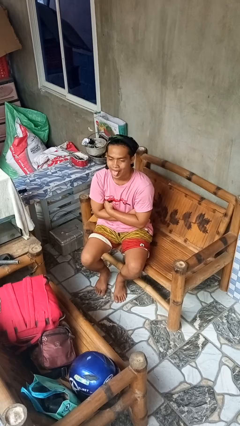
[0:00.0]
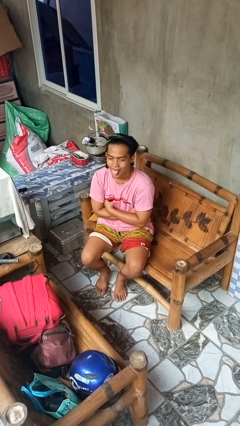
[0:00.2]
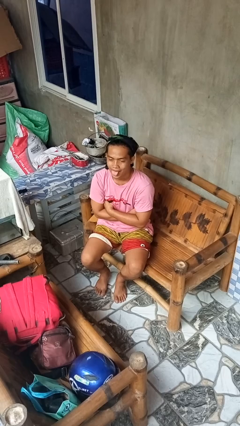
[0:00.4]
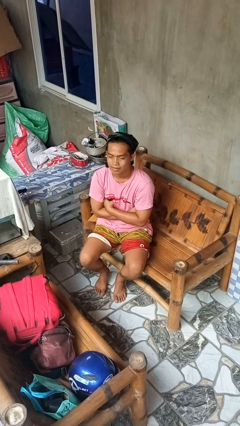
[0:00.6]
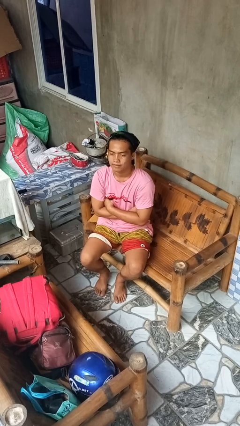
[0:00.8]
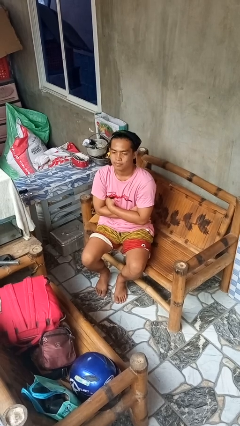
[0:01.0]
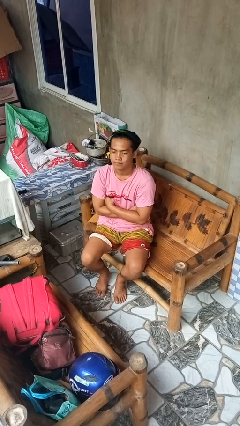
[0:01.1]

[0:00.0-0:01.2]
person sticks out tongue

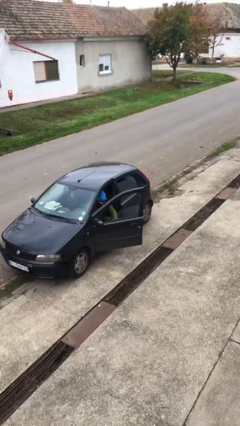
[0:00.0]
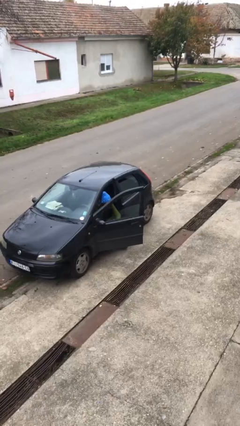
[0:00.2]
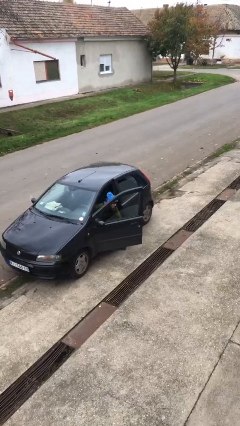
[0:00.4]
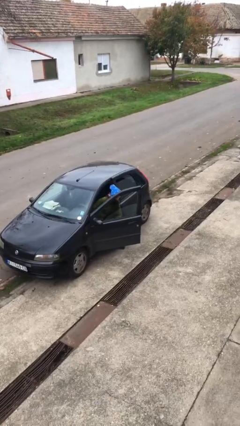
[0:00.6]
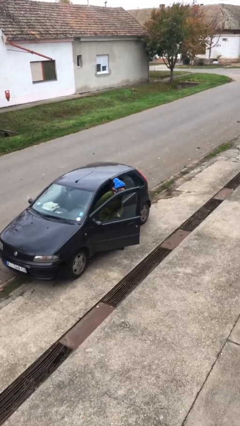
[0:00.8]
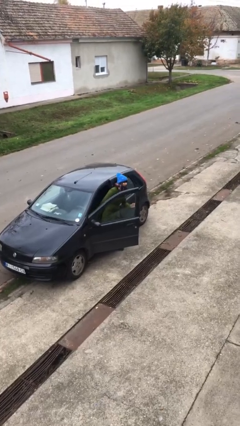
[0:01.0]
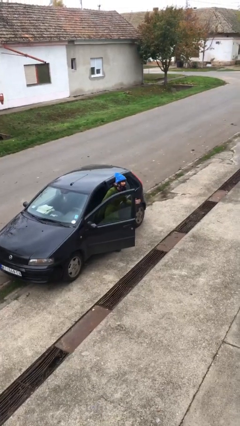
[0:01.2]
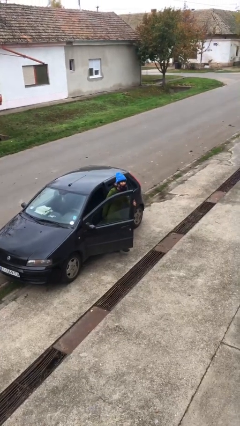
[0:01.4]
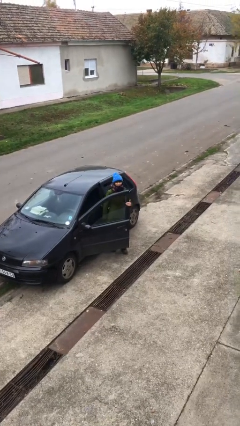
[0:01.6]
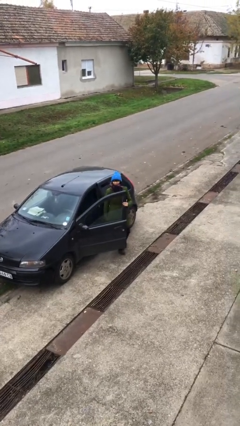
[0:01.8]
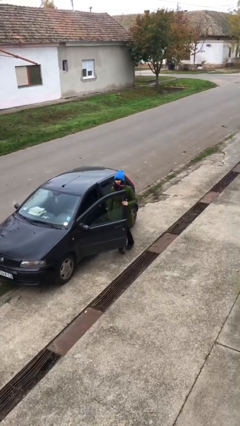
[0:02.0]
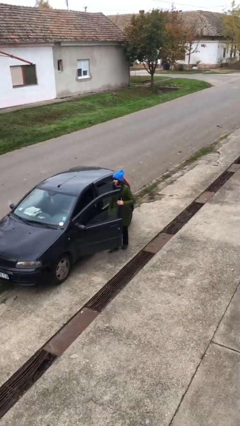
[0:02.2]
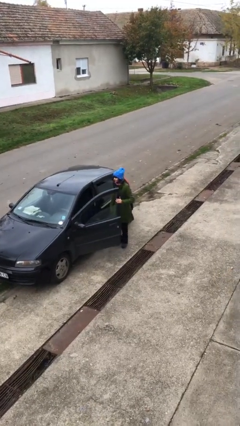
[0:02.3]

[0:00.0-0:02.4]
person exits car

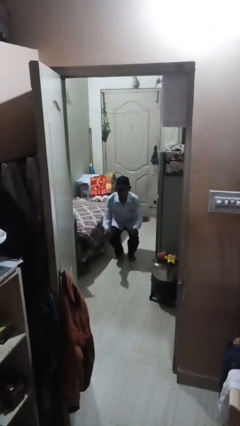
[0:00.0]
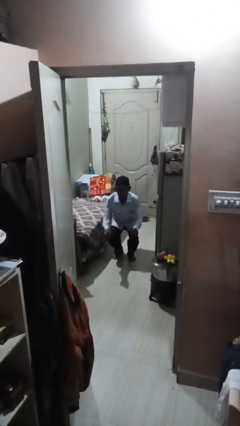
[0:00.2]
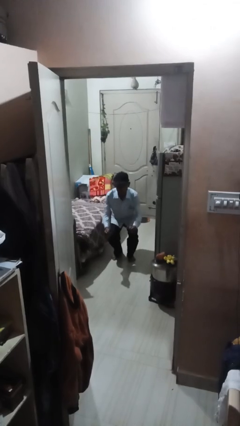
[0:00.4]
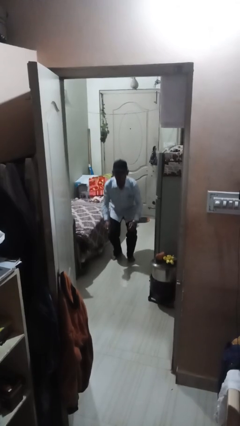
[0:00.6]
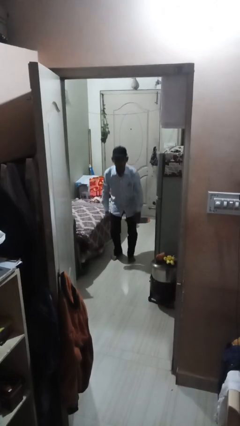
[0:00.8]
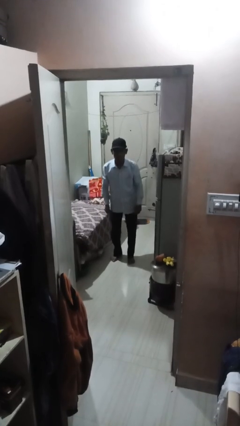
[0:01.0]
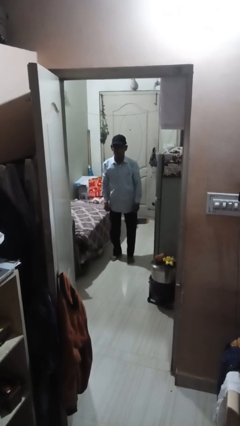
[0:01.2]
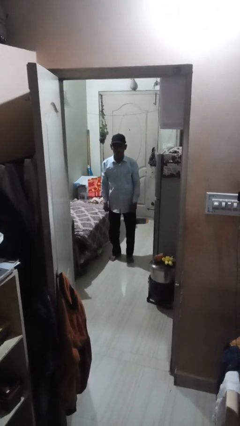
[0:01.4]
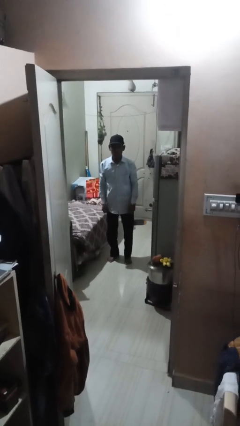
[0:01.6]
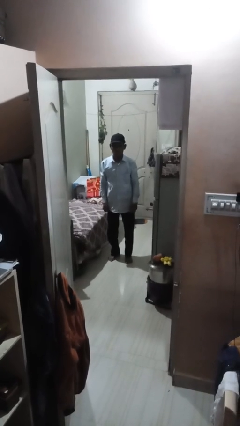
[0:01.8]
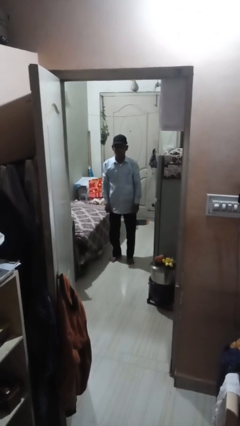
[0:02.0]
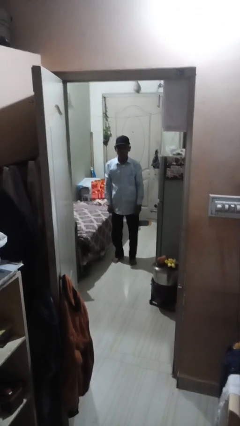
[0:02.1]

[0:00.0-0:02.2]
person stands up

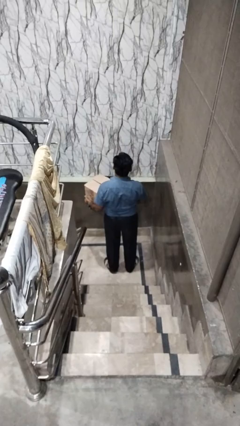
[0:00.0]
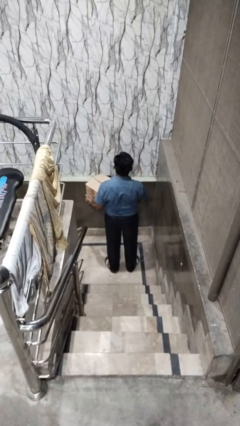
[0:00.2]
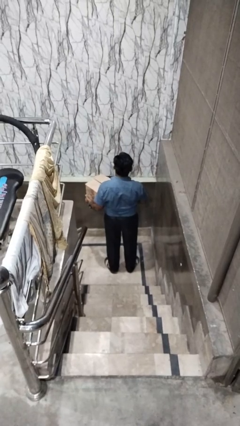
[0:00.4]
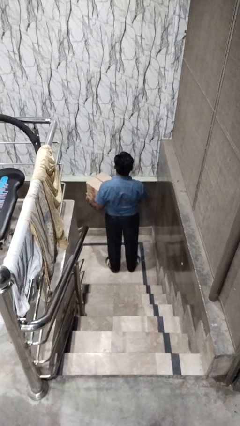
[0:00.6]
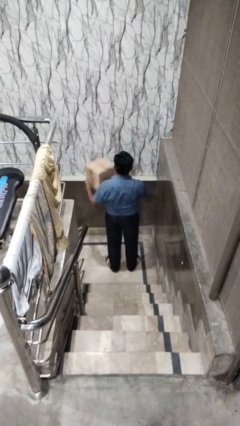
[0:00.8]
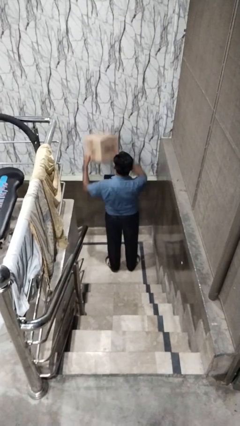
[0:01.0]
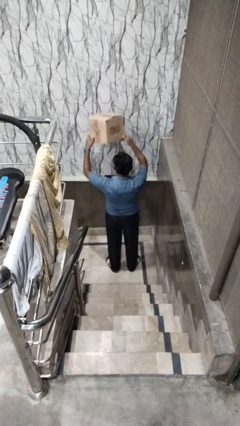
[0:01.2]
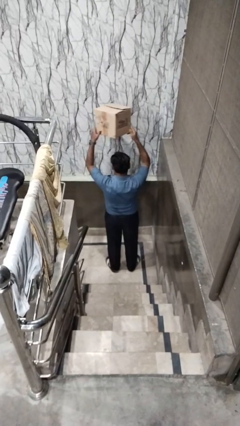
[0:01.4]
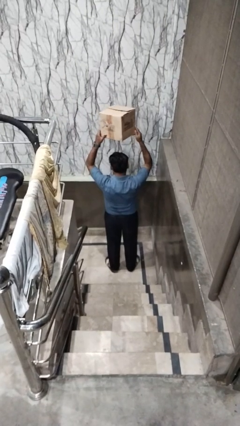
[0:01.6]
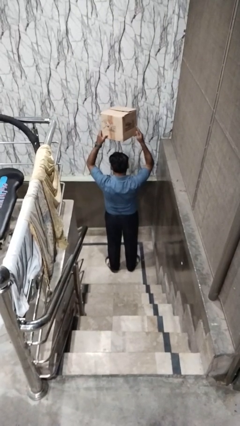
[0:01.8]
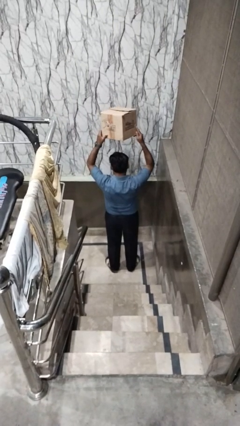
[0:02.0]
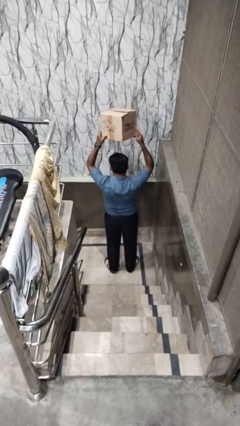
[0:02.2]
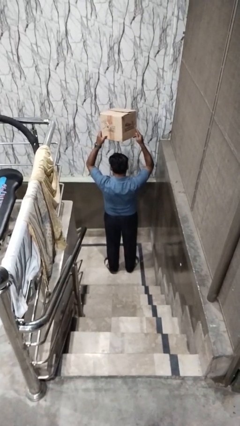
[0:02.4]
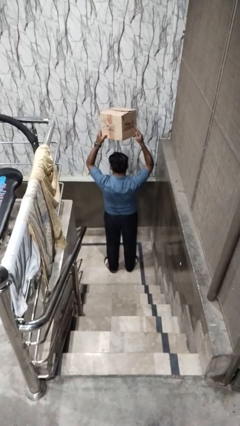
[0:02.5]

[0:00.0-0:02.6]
person holds object above head

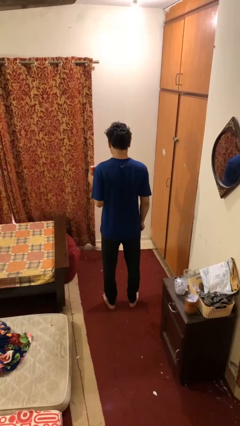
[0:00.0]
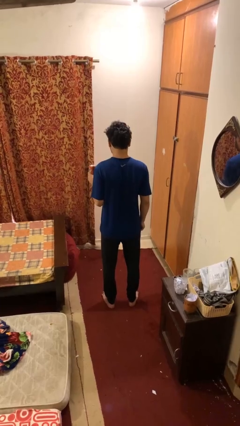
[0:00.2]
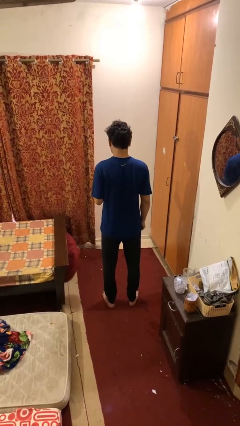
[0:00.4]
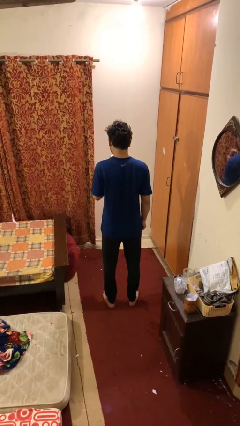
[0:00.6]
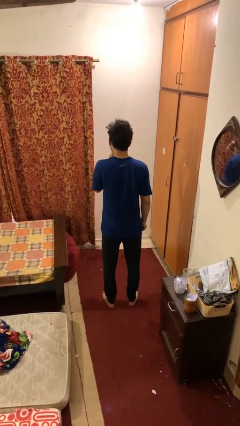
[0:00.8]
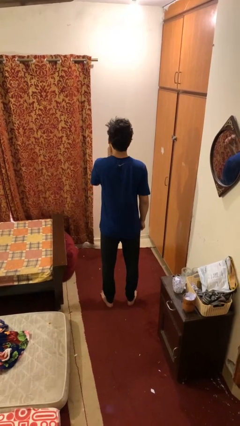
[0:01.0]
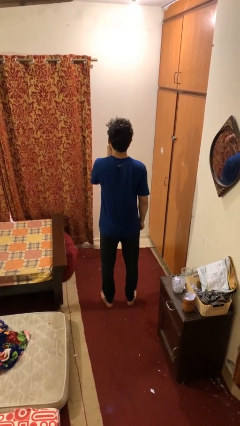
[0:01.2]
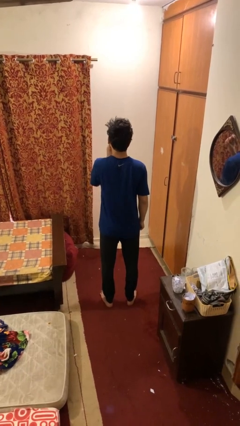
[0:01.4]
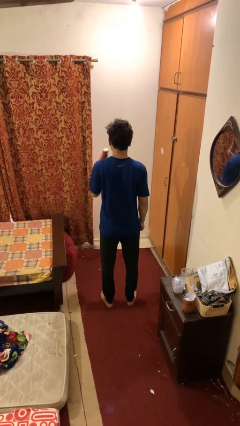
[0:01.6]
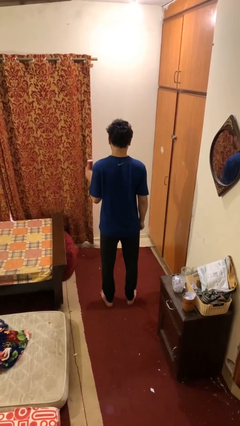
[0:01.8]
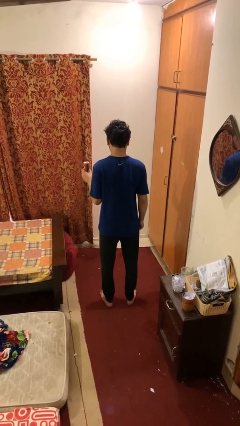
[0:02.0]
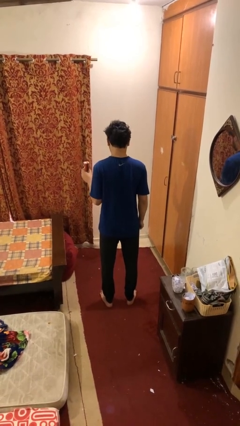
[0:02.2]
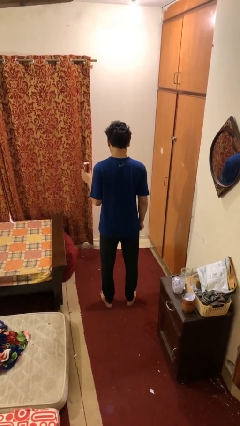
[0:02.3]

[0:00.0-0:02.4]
person drinks from beverage can

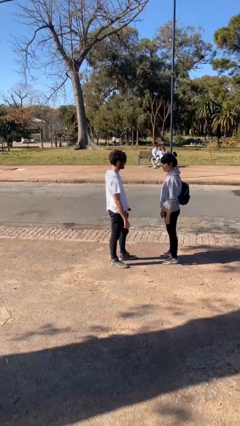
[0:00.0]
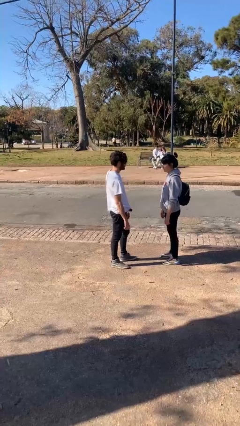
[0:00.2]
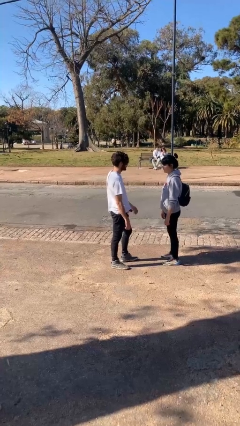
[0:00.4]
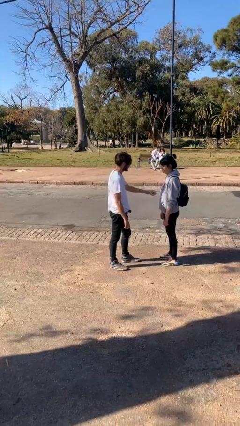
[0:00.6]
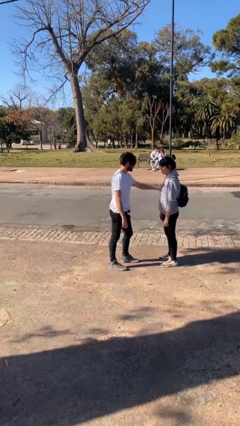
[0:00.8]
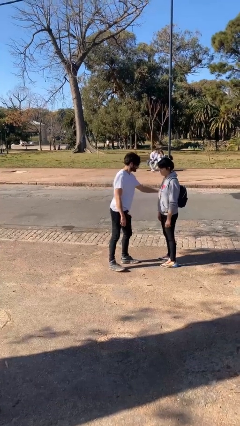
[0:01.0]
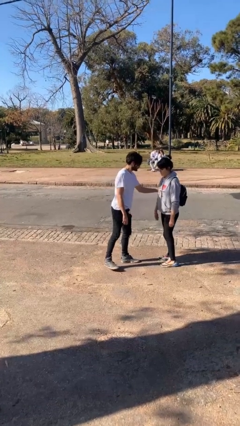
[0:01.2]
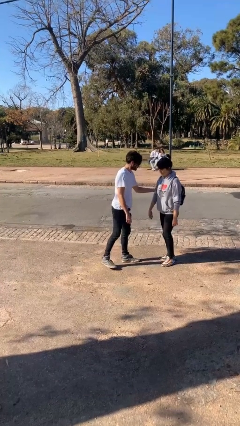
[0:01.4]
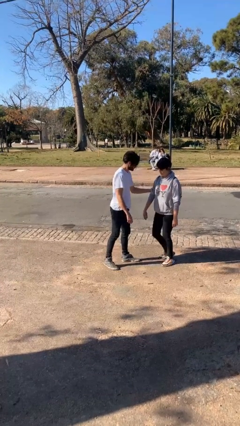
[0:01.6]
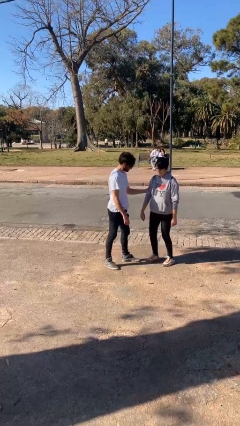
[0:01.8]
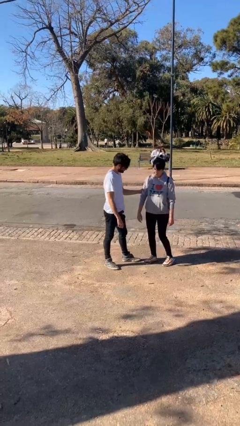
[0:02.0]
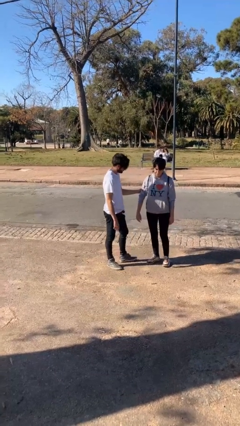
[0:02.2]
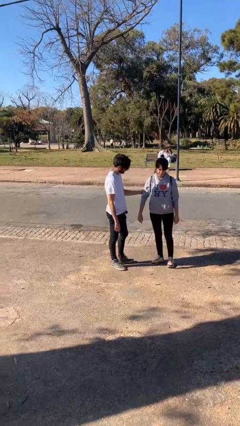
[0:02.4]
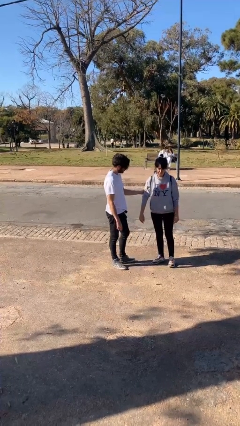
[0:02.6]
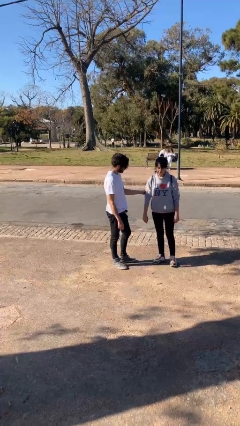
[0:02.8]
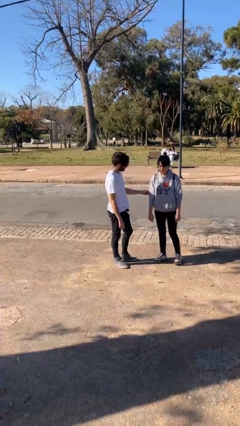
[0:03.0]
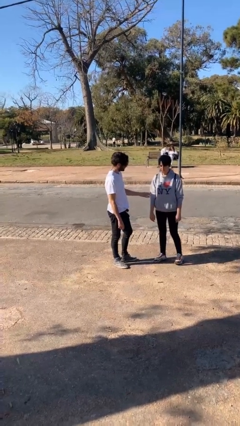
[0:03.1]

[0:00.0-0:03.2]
person grabs person by bicep

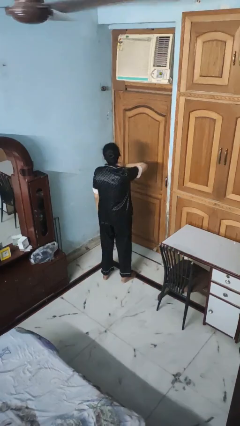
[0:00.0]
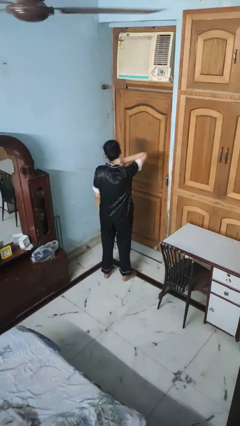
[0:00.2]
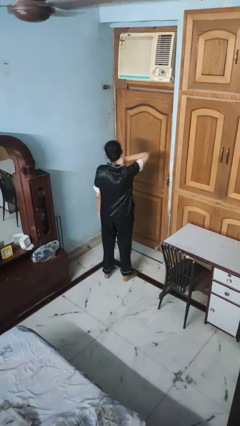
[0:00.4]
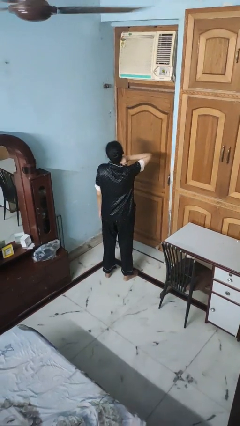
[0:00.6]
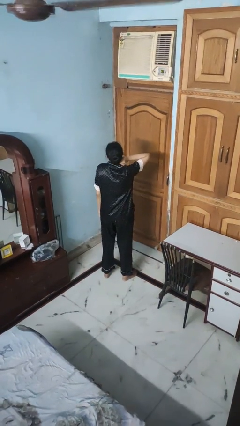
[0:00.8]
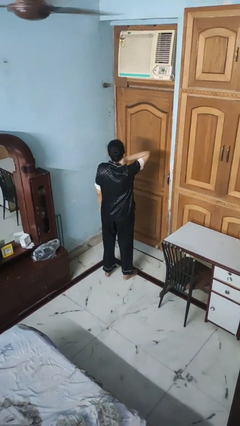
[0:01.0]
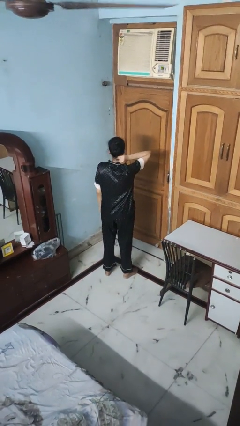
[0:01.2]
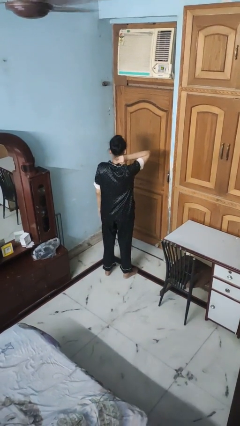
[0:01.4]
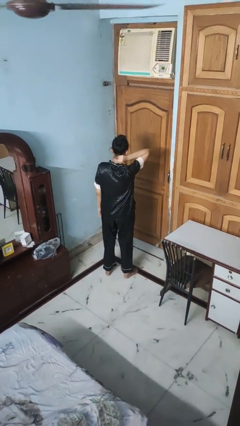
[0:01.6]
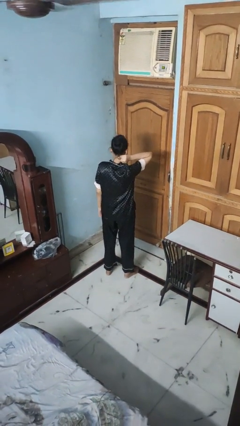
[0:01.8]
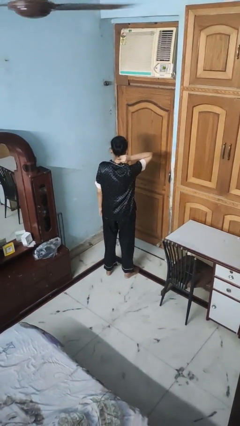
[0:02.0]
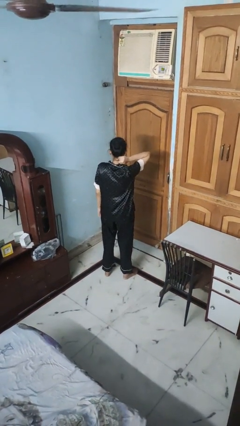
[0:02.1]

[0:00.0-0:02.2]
person rubs neck

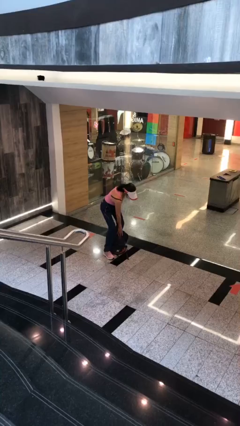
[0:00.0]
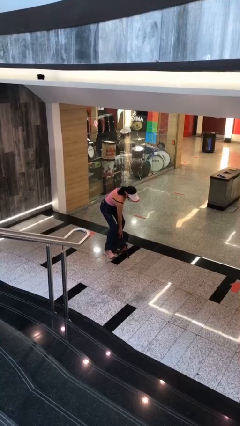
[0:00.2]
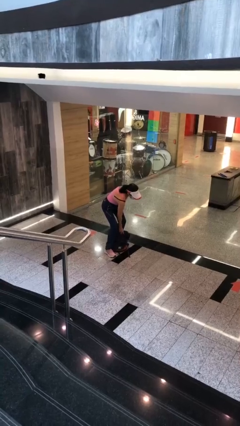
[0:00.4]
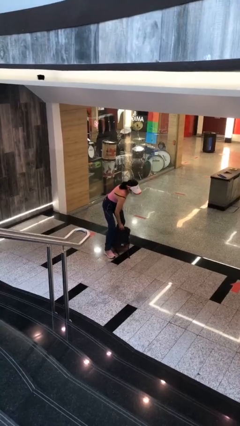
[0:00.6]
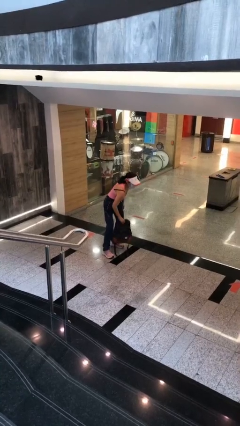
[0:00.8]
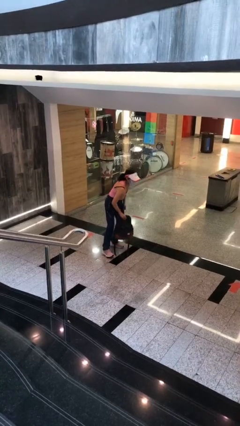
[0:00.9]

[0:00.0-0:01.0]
person picks up object from floor
